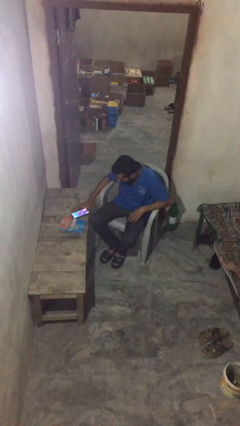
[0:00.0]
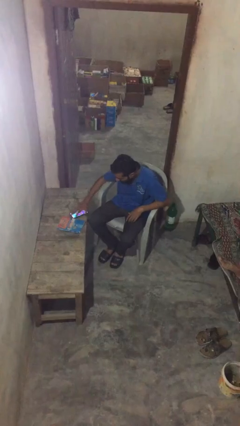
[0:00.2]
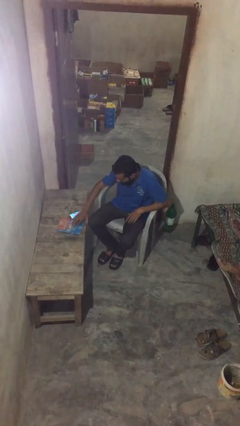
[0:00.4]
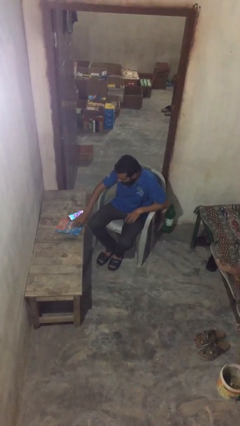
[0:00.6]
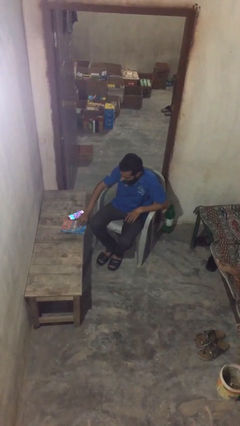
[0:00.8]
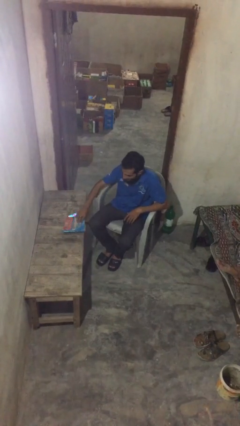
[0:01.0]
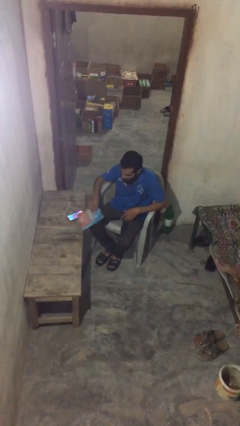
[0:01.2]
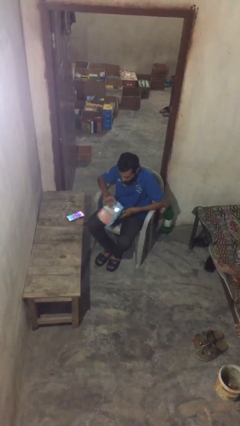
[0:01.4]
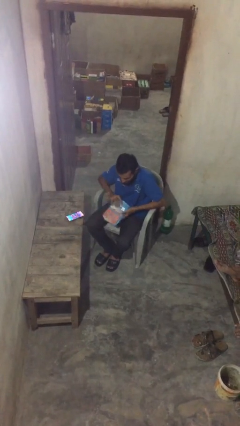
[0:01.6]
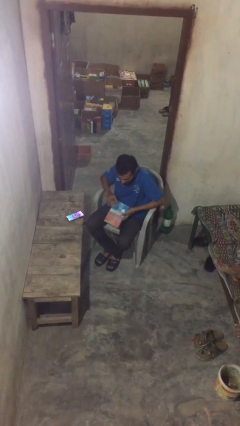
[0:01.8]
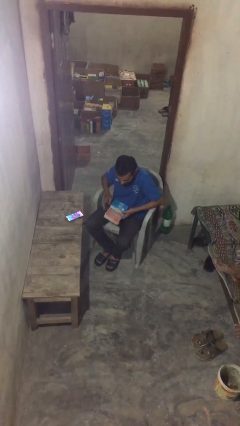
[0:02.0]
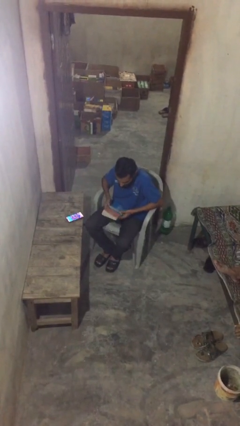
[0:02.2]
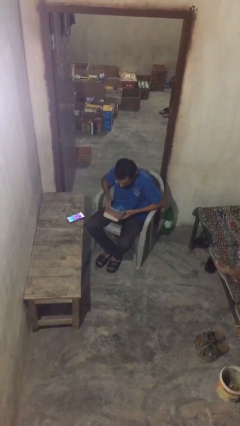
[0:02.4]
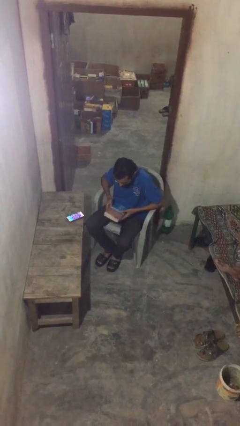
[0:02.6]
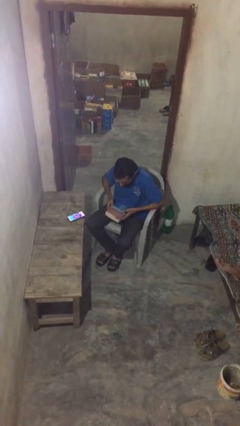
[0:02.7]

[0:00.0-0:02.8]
person picks up object from table

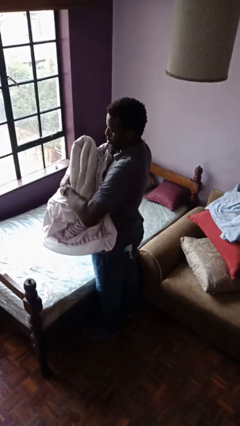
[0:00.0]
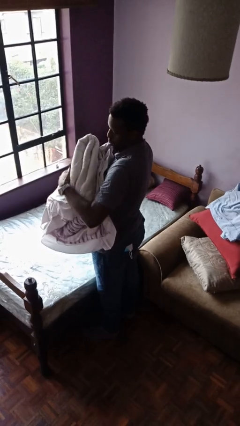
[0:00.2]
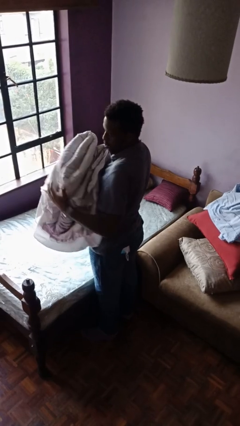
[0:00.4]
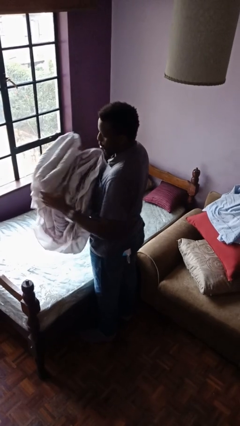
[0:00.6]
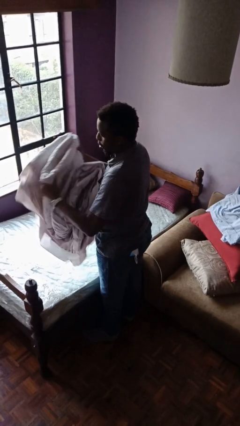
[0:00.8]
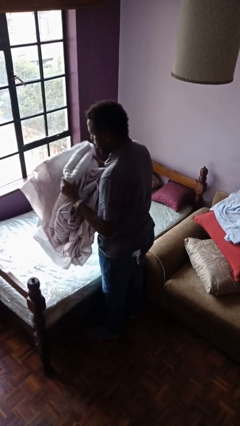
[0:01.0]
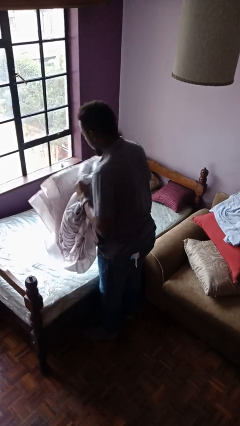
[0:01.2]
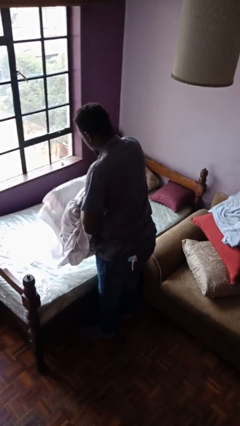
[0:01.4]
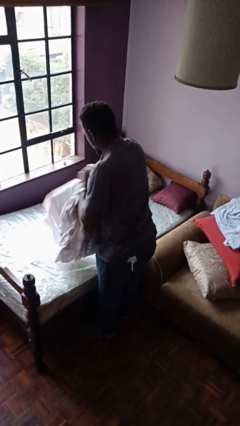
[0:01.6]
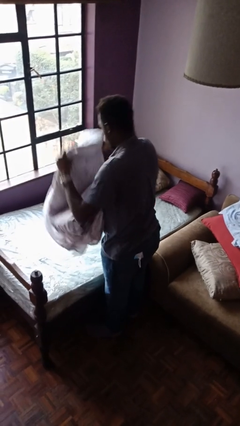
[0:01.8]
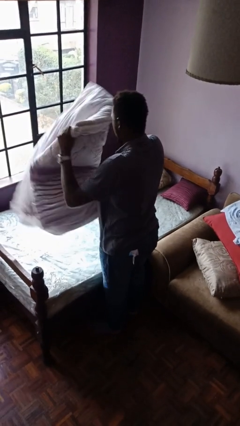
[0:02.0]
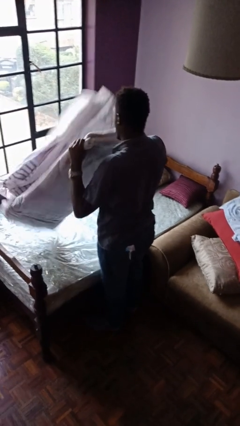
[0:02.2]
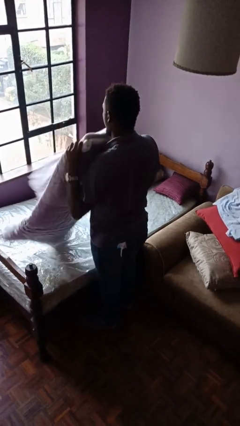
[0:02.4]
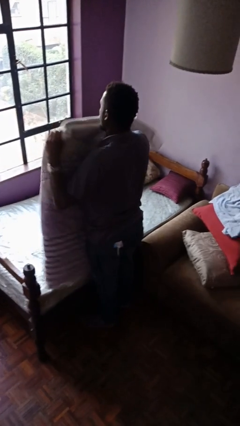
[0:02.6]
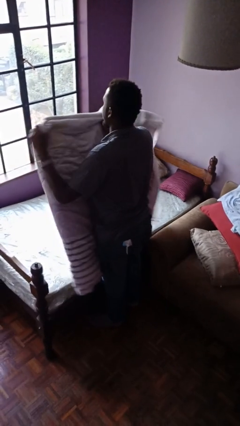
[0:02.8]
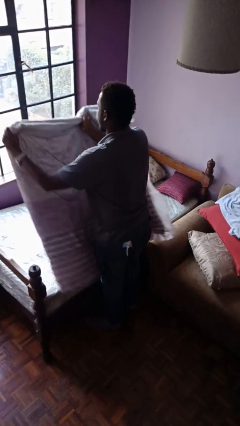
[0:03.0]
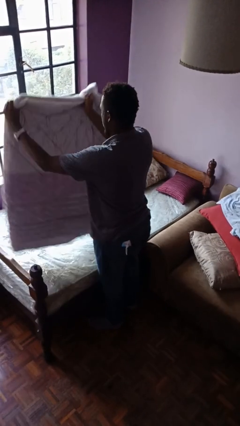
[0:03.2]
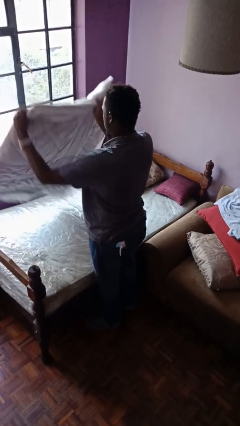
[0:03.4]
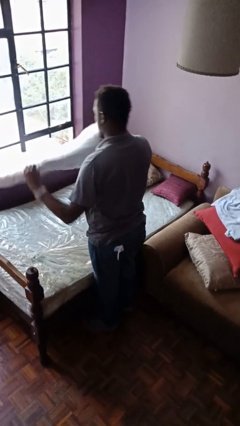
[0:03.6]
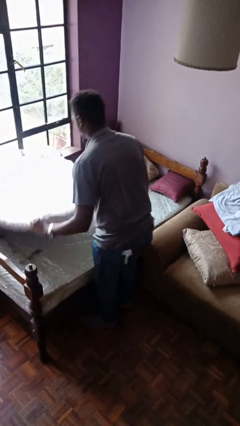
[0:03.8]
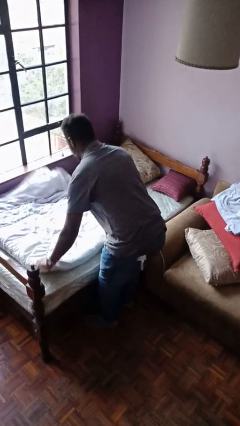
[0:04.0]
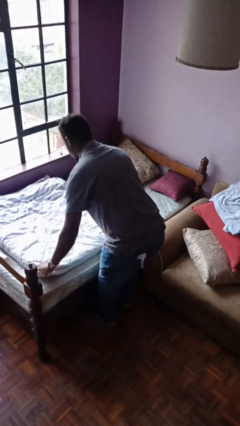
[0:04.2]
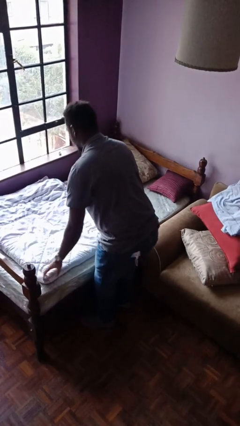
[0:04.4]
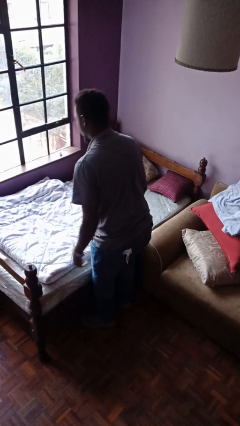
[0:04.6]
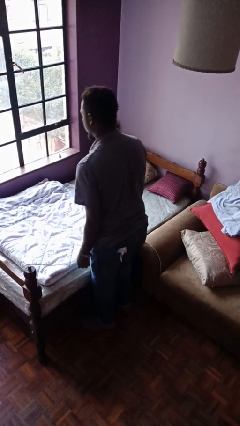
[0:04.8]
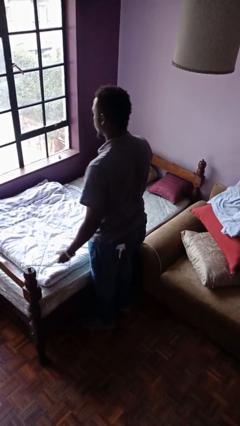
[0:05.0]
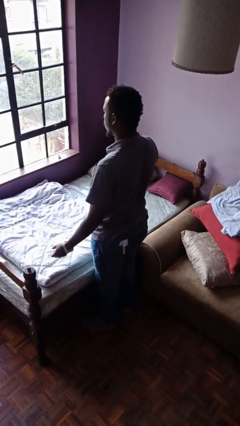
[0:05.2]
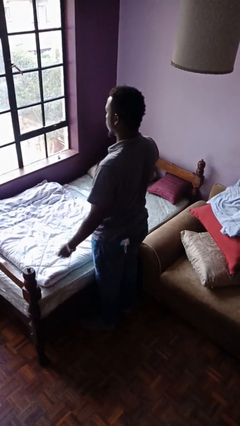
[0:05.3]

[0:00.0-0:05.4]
person unfolds blanket

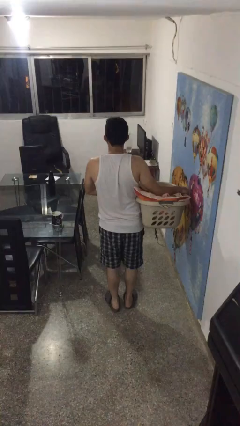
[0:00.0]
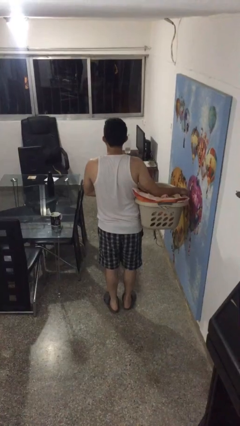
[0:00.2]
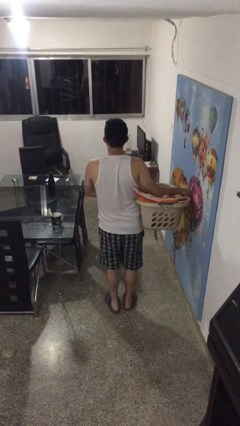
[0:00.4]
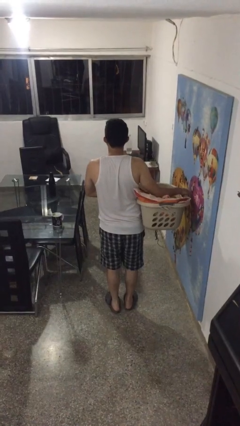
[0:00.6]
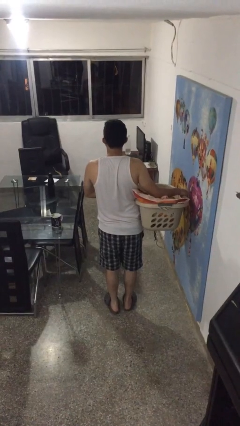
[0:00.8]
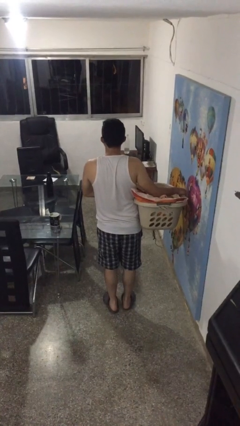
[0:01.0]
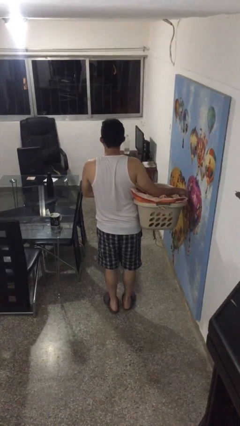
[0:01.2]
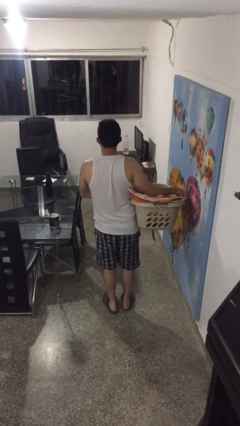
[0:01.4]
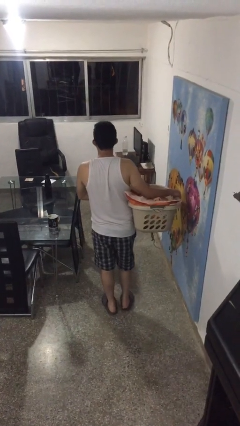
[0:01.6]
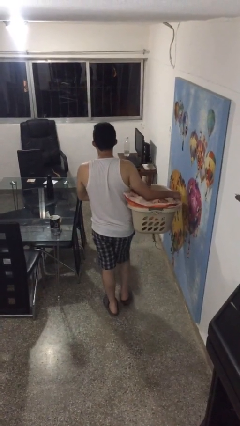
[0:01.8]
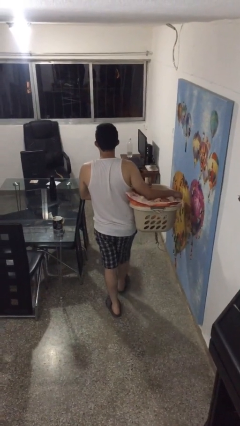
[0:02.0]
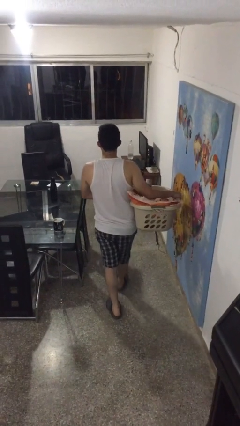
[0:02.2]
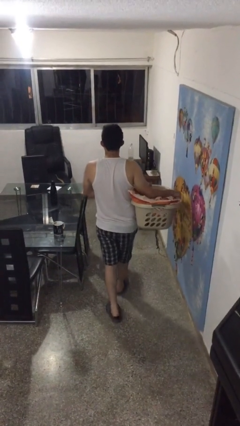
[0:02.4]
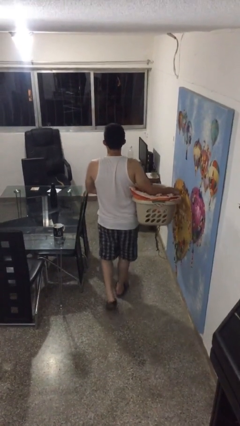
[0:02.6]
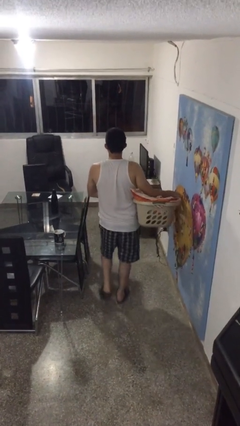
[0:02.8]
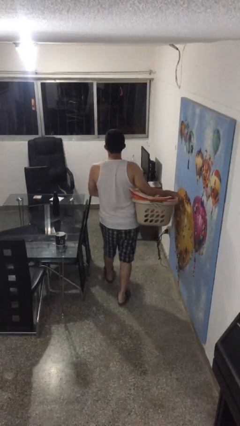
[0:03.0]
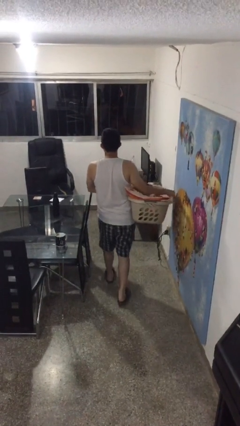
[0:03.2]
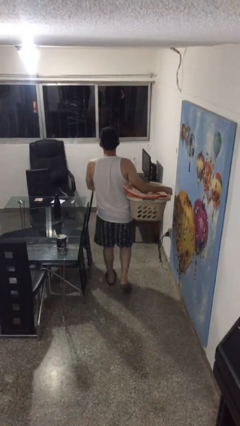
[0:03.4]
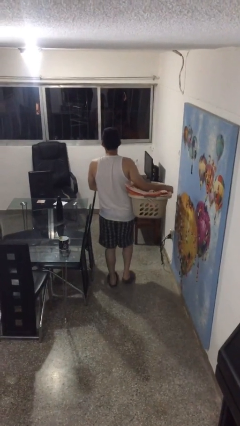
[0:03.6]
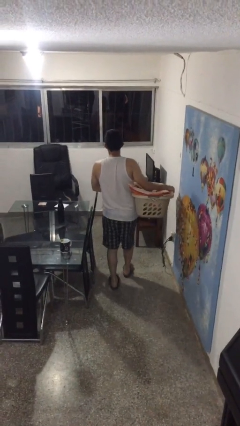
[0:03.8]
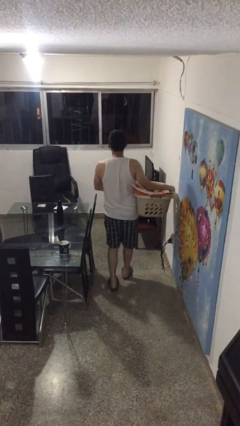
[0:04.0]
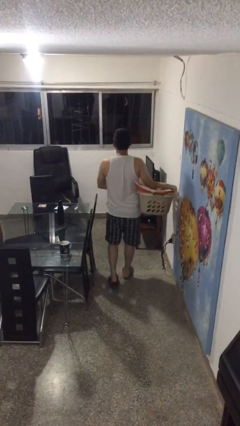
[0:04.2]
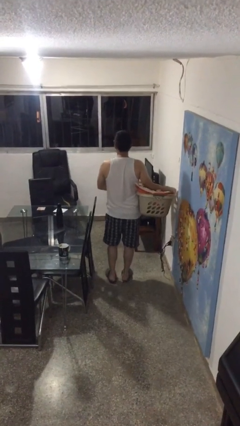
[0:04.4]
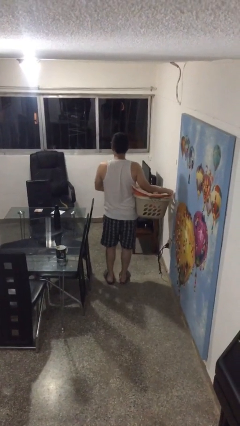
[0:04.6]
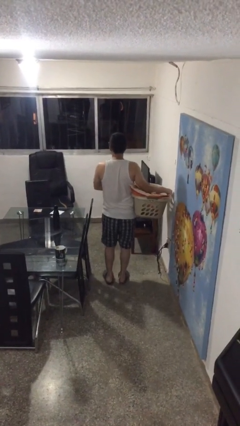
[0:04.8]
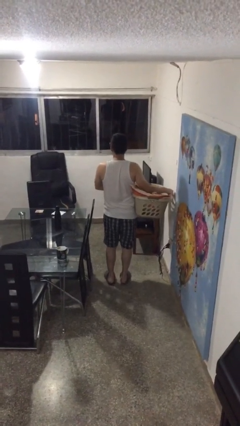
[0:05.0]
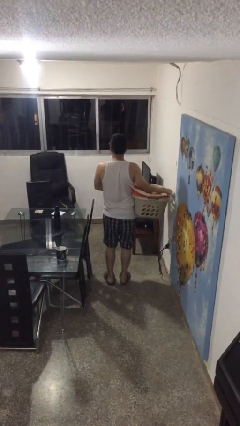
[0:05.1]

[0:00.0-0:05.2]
person carries laundry basket

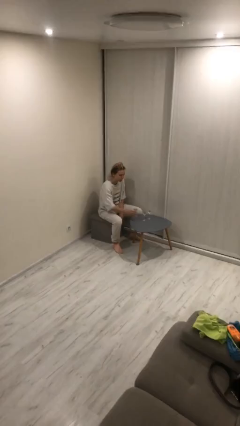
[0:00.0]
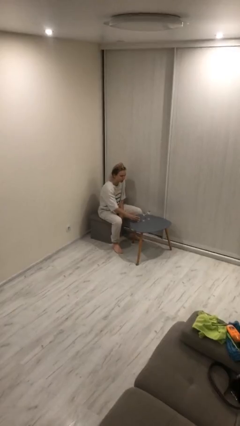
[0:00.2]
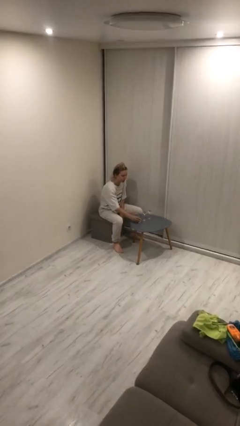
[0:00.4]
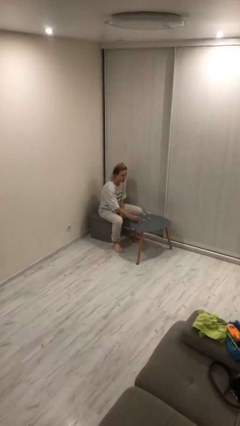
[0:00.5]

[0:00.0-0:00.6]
person puts down object on table

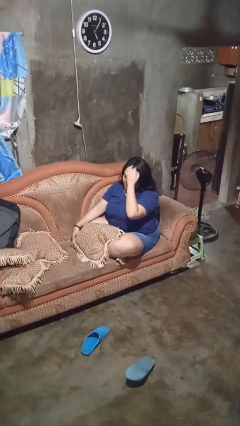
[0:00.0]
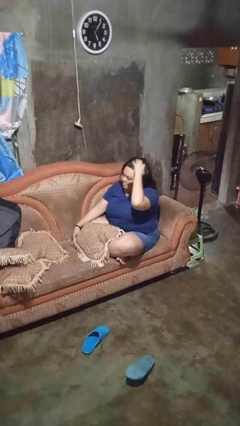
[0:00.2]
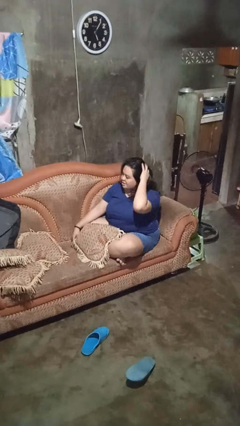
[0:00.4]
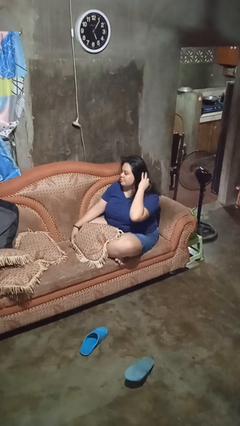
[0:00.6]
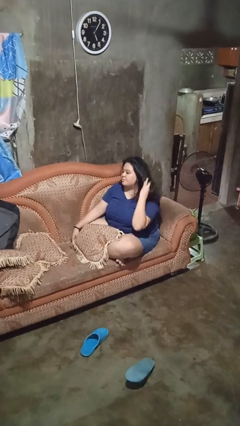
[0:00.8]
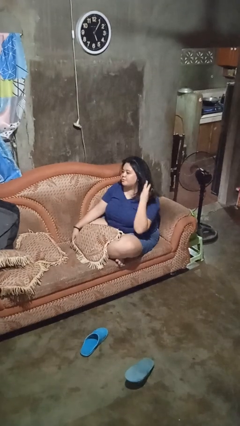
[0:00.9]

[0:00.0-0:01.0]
person strokes hair

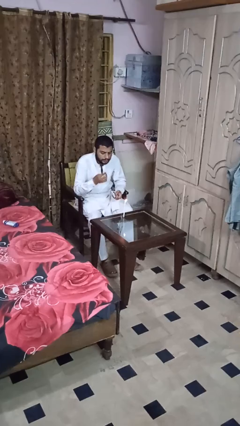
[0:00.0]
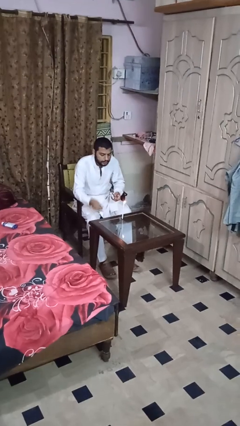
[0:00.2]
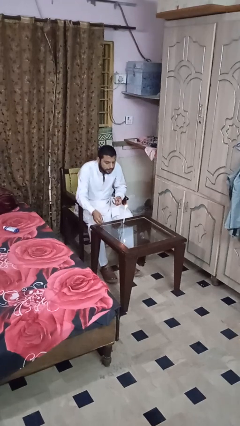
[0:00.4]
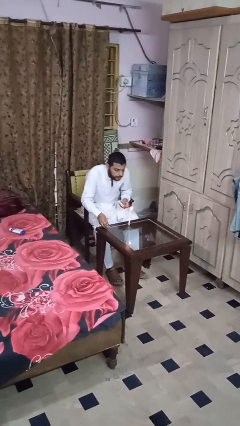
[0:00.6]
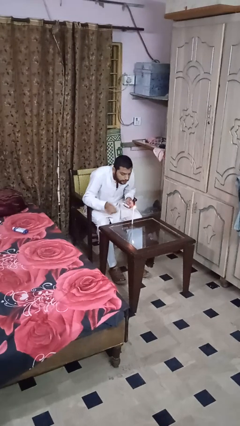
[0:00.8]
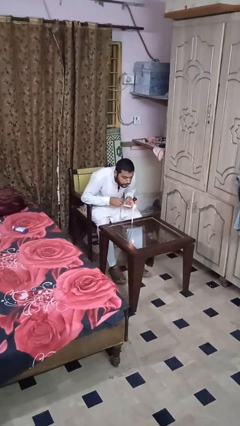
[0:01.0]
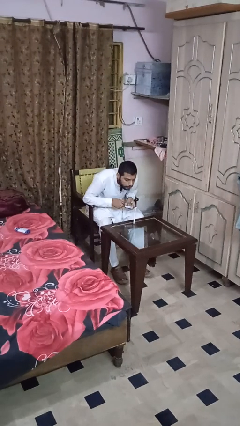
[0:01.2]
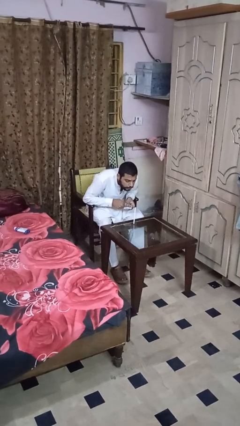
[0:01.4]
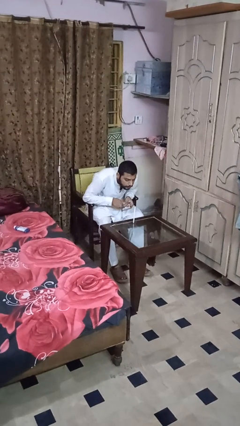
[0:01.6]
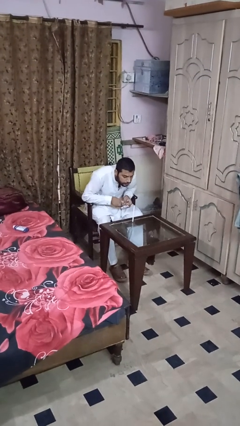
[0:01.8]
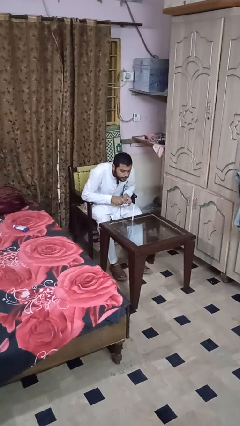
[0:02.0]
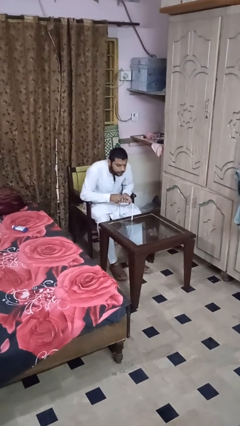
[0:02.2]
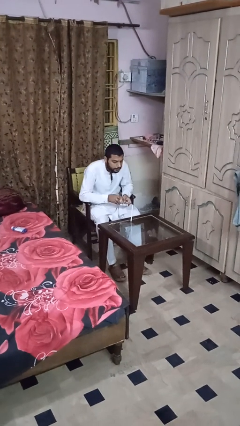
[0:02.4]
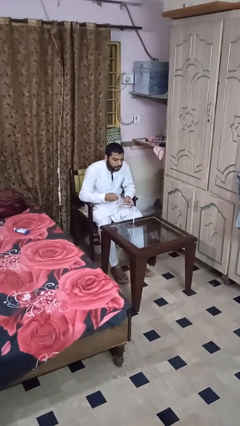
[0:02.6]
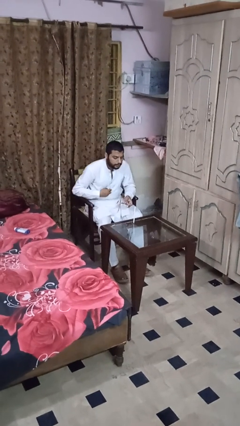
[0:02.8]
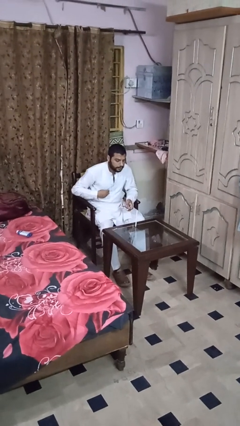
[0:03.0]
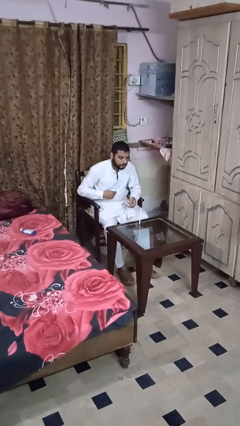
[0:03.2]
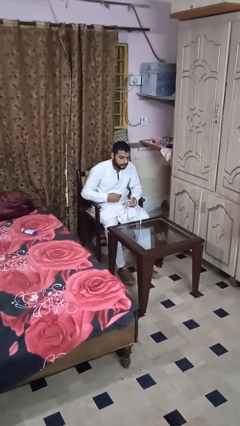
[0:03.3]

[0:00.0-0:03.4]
person extinguishes candle
